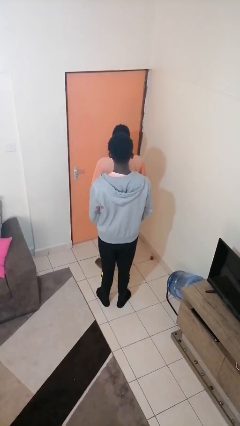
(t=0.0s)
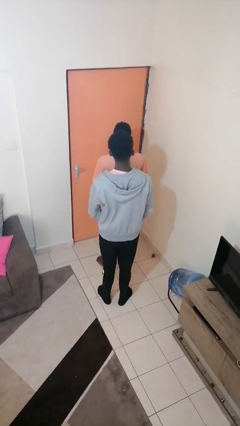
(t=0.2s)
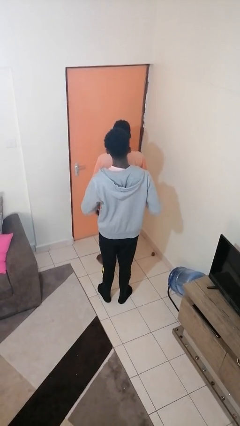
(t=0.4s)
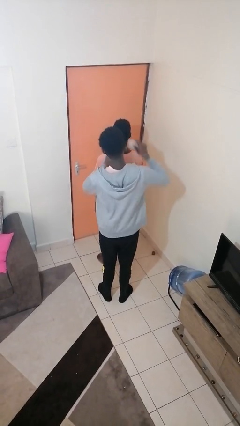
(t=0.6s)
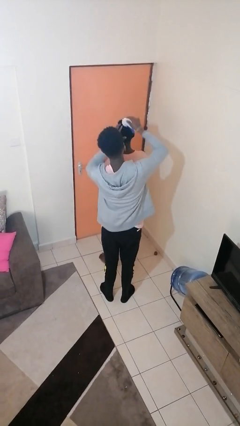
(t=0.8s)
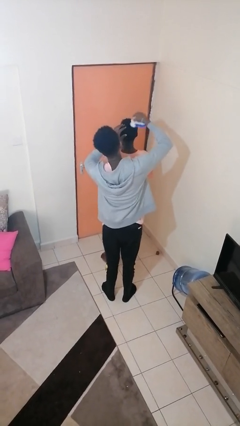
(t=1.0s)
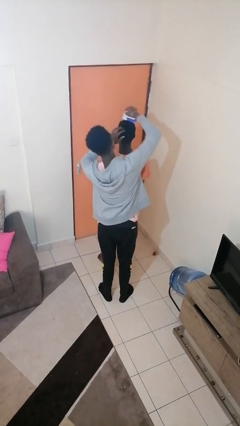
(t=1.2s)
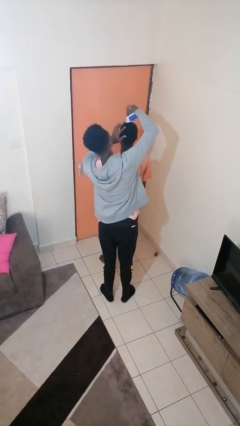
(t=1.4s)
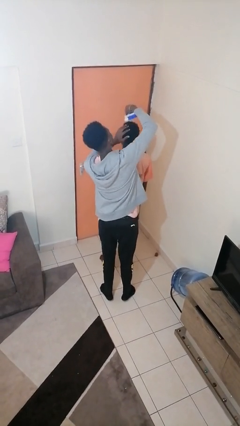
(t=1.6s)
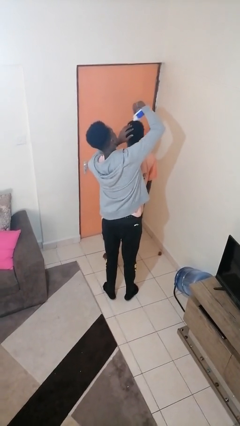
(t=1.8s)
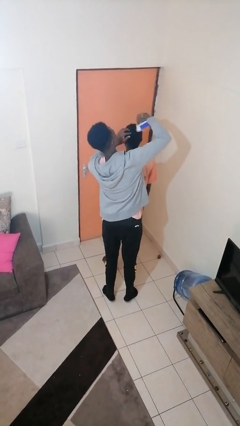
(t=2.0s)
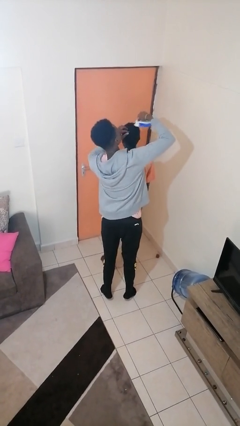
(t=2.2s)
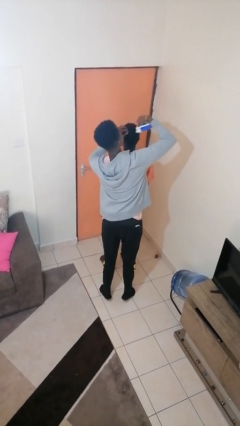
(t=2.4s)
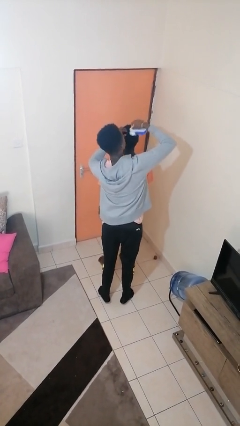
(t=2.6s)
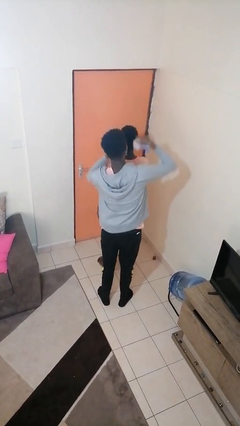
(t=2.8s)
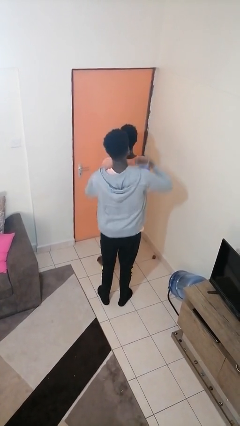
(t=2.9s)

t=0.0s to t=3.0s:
person brushes hair of person

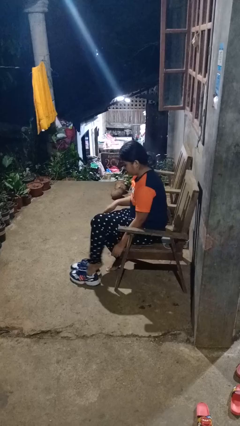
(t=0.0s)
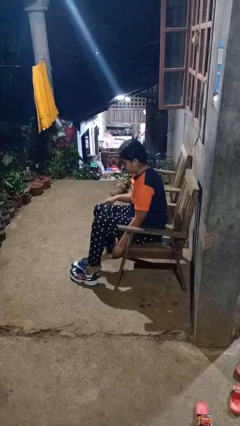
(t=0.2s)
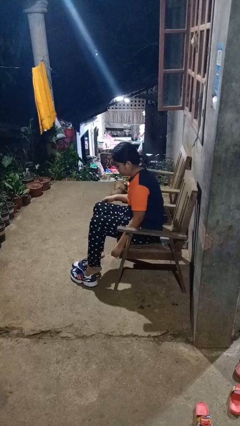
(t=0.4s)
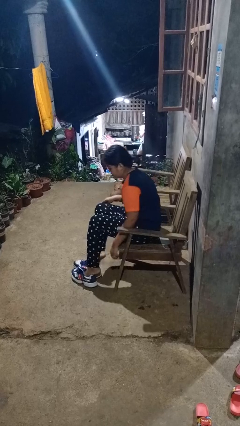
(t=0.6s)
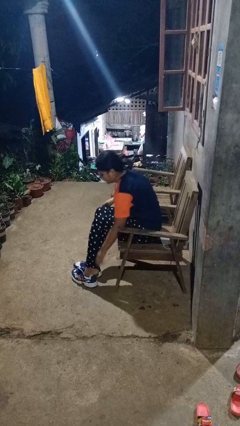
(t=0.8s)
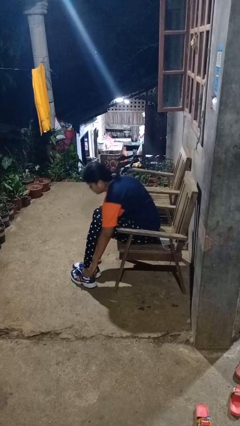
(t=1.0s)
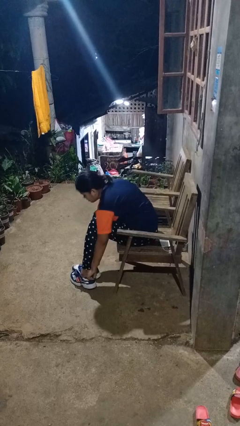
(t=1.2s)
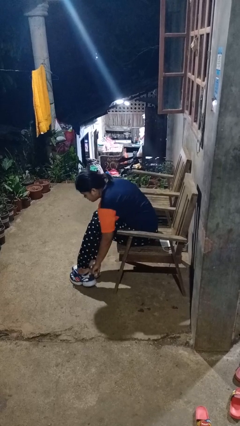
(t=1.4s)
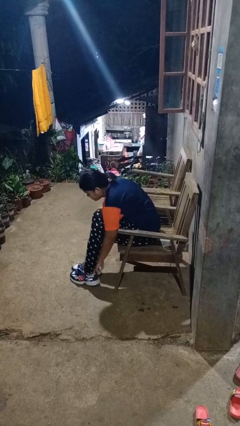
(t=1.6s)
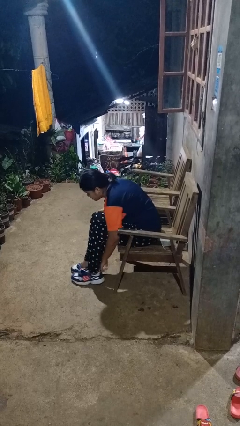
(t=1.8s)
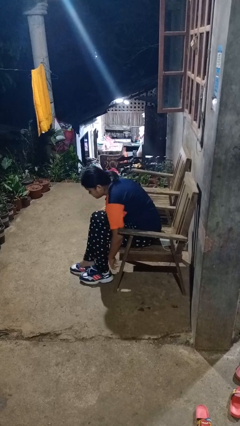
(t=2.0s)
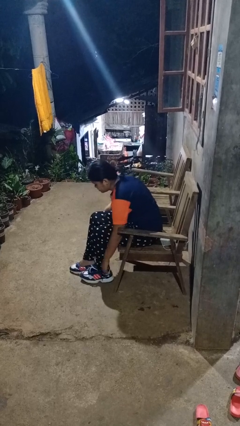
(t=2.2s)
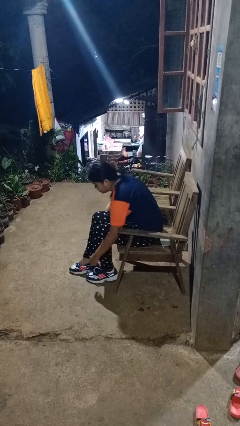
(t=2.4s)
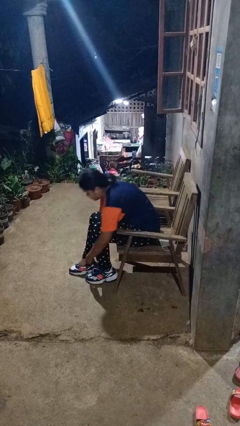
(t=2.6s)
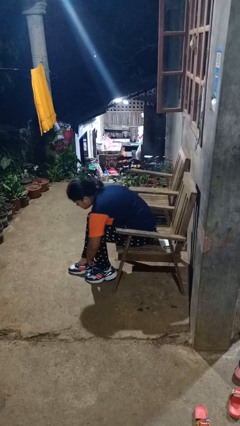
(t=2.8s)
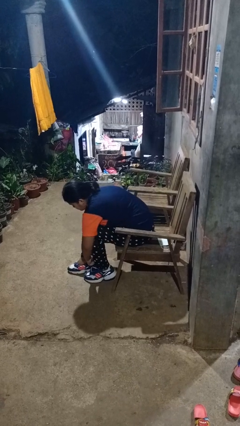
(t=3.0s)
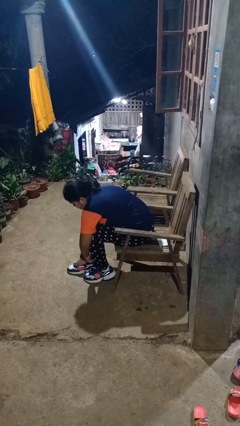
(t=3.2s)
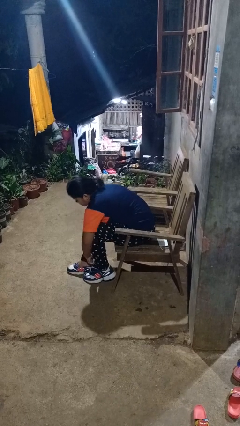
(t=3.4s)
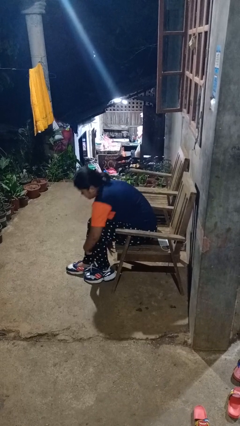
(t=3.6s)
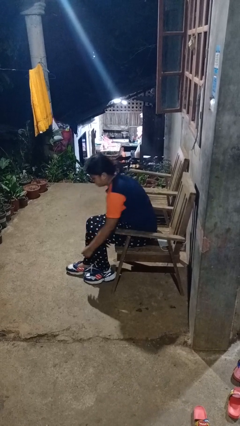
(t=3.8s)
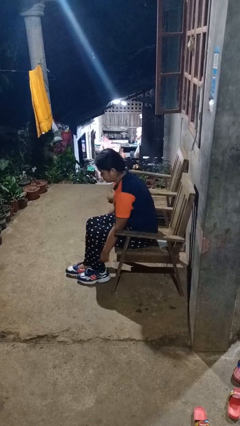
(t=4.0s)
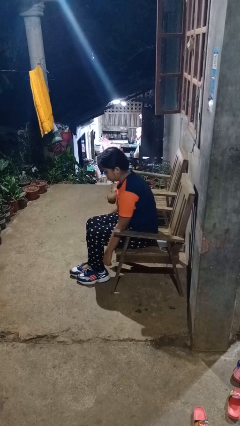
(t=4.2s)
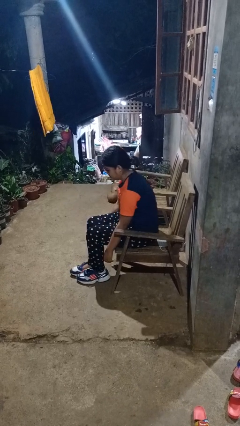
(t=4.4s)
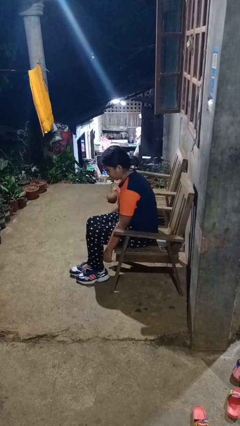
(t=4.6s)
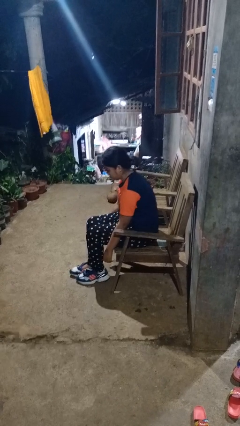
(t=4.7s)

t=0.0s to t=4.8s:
person puts on shoes

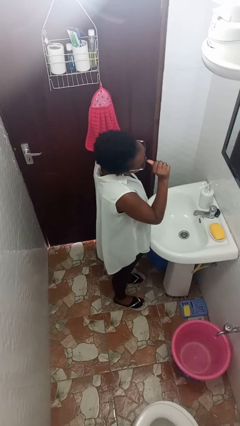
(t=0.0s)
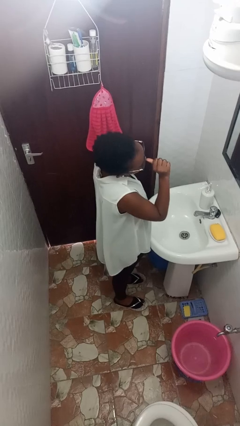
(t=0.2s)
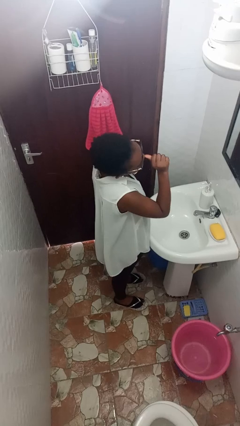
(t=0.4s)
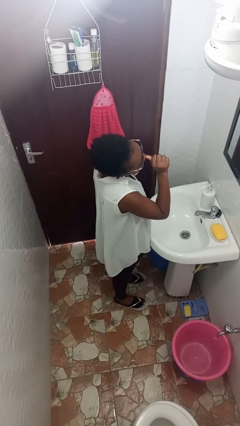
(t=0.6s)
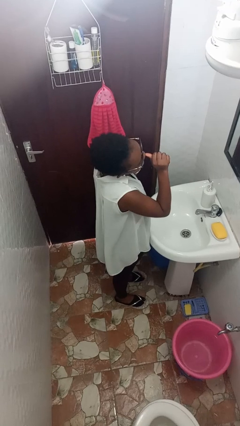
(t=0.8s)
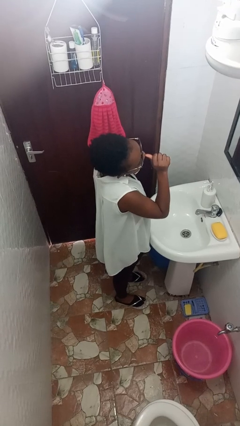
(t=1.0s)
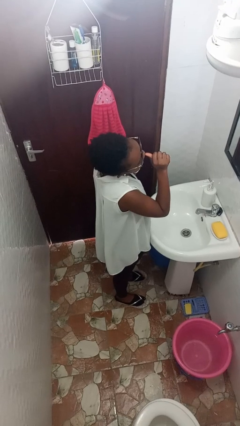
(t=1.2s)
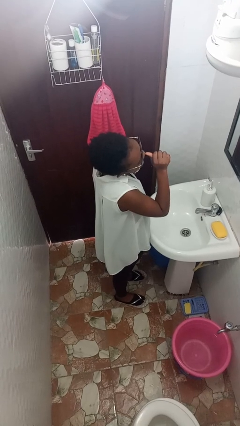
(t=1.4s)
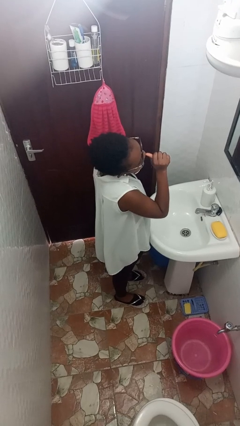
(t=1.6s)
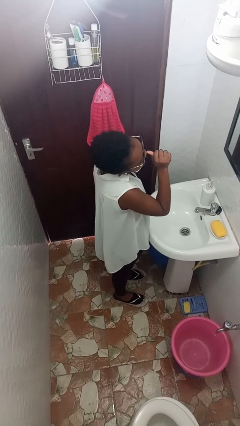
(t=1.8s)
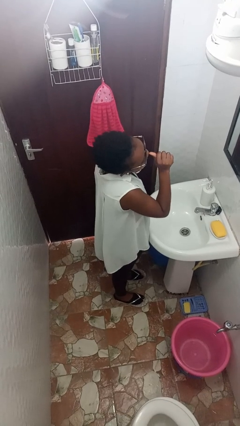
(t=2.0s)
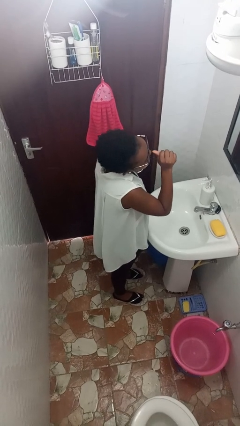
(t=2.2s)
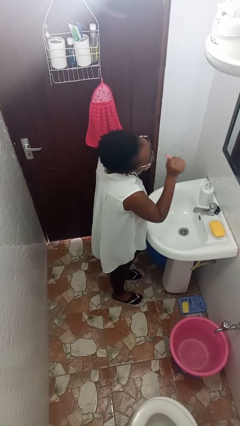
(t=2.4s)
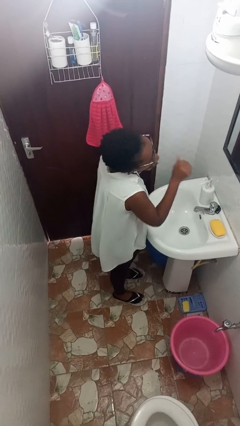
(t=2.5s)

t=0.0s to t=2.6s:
person flosses

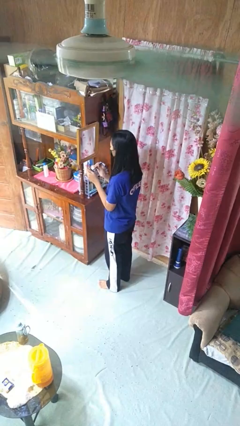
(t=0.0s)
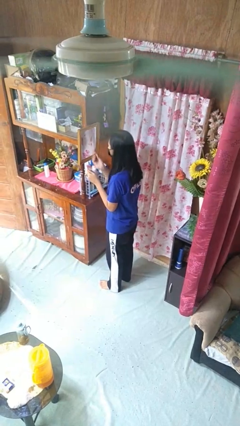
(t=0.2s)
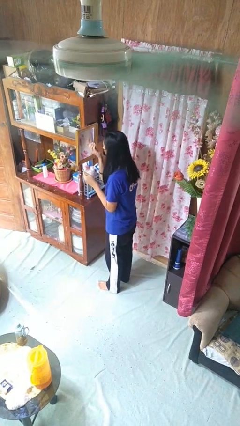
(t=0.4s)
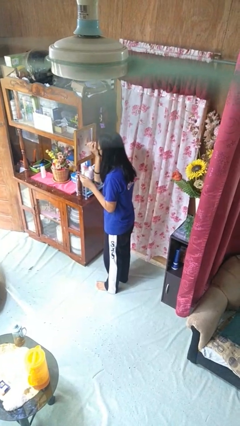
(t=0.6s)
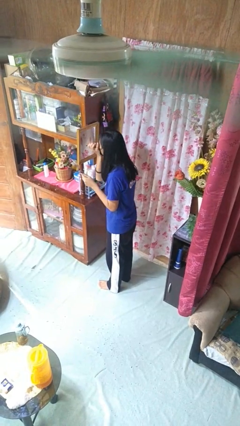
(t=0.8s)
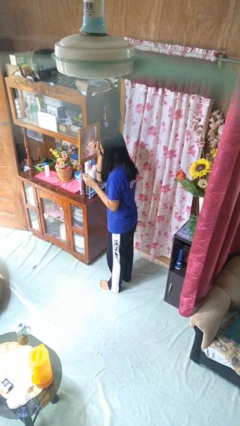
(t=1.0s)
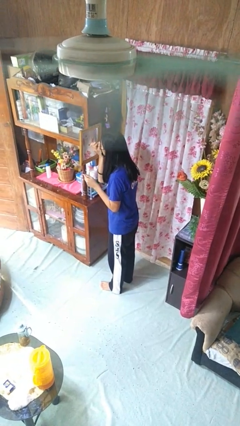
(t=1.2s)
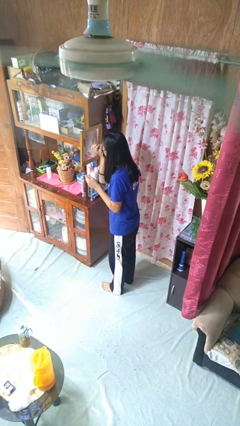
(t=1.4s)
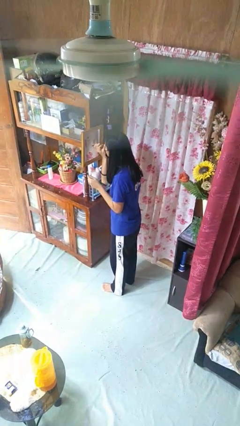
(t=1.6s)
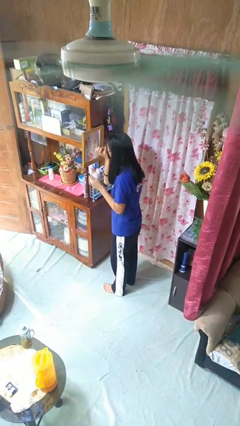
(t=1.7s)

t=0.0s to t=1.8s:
person applies eye makeup

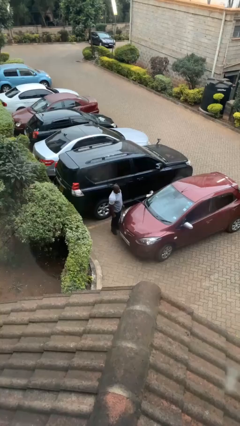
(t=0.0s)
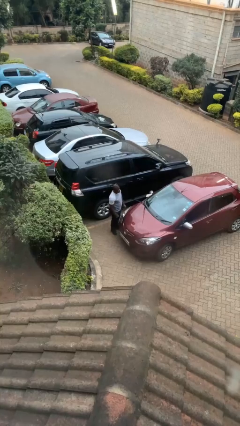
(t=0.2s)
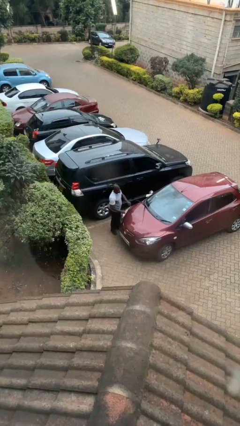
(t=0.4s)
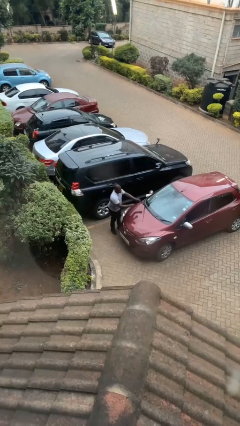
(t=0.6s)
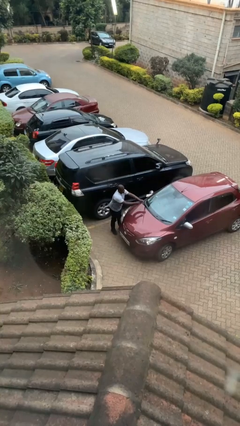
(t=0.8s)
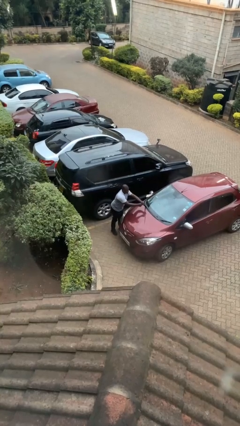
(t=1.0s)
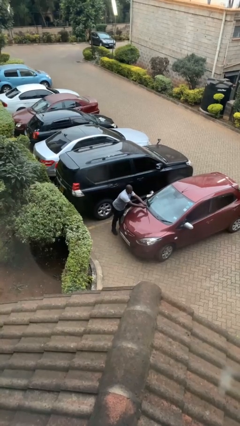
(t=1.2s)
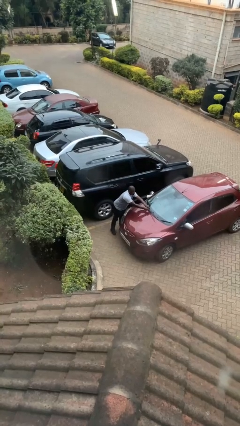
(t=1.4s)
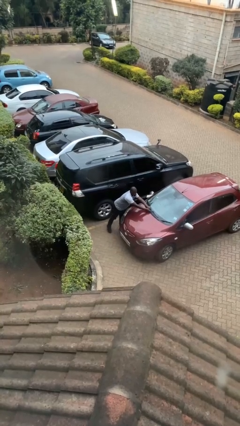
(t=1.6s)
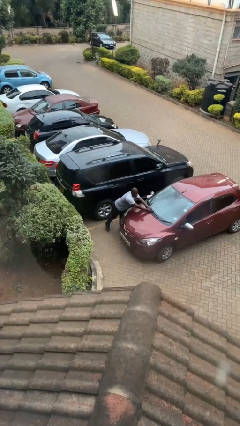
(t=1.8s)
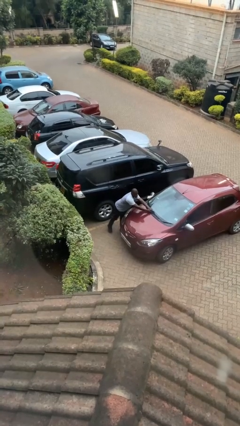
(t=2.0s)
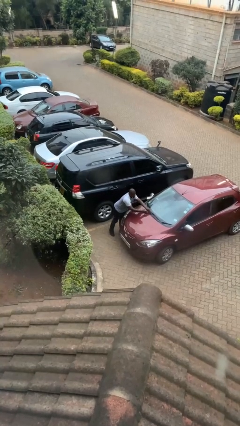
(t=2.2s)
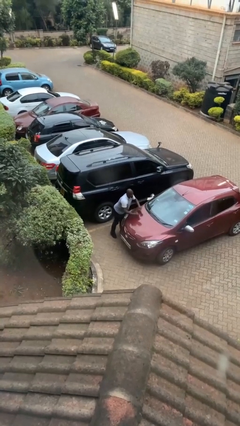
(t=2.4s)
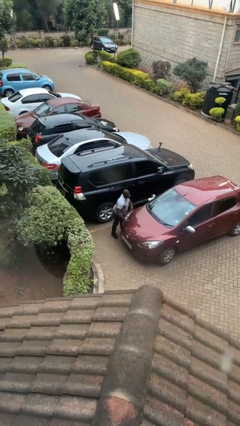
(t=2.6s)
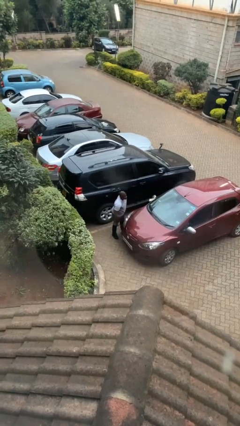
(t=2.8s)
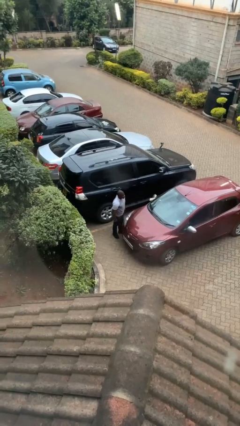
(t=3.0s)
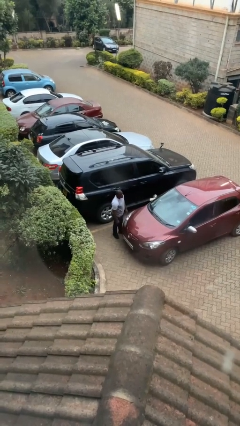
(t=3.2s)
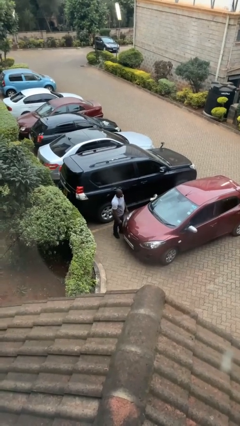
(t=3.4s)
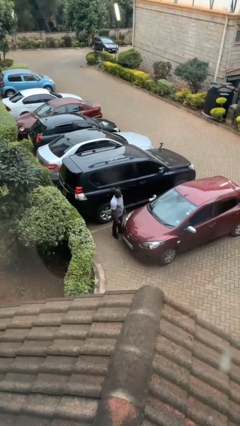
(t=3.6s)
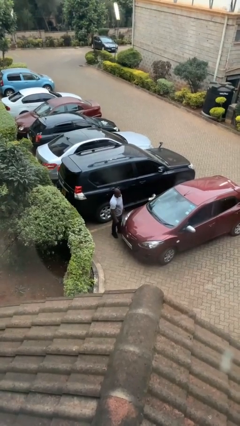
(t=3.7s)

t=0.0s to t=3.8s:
person flips down car wipers

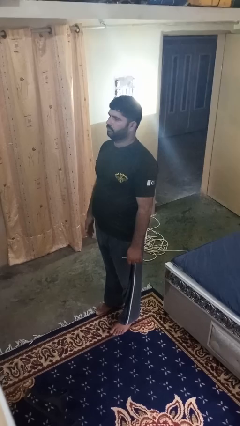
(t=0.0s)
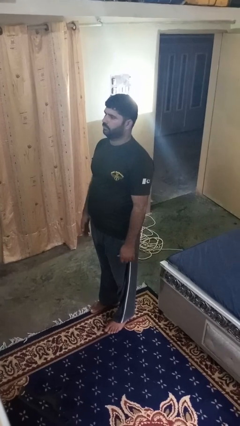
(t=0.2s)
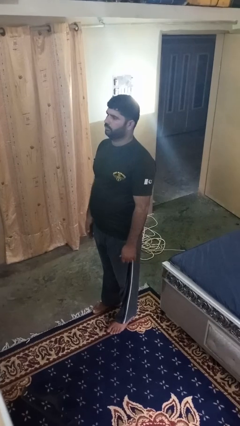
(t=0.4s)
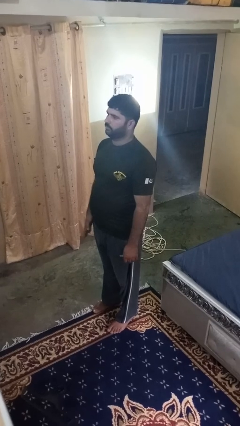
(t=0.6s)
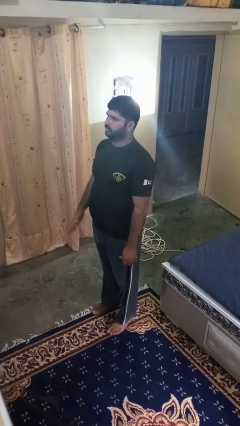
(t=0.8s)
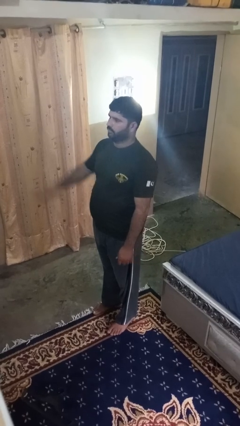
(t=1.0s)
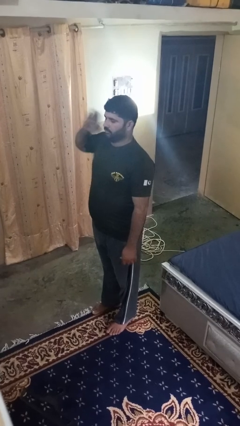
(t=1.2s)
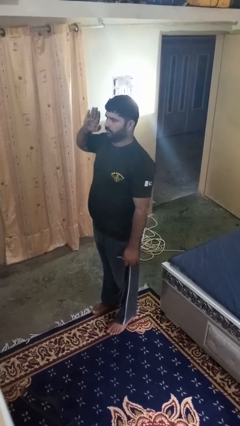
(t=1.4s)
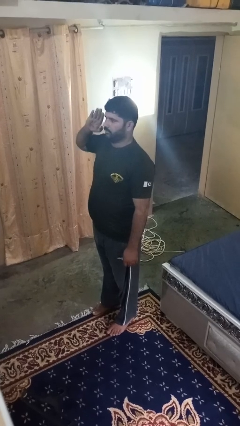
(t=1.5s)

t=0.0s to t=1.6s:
person salutes
